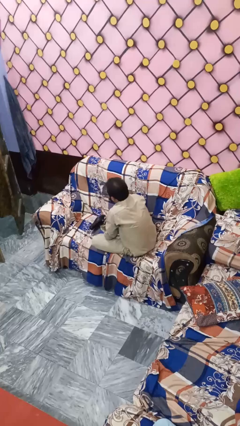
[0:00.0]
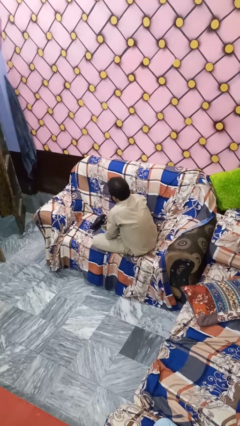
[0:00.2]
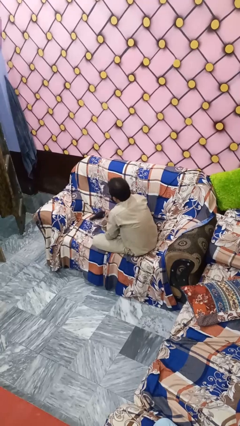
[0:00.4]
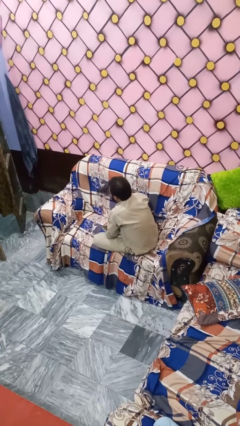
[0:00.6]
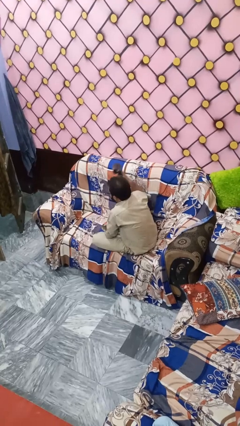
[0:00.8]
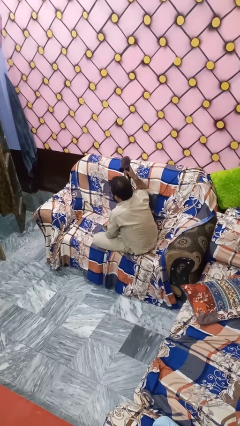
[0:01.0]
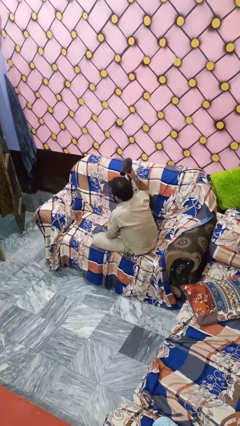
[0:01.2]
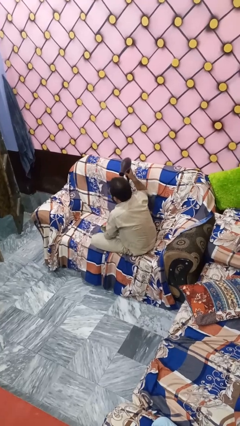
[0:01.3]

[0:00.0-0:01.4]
person dries hair with hairdryer

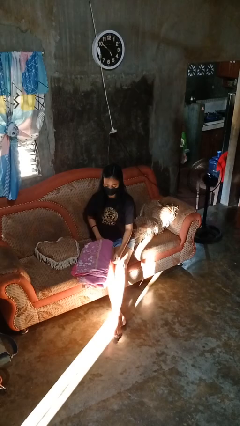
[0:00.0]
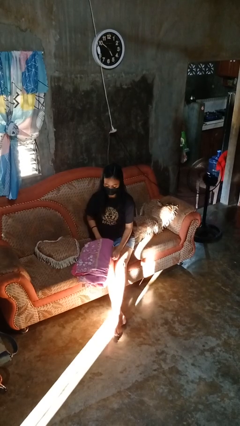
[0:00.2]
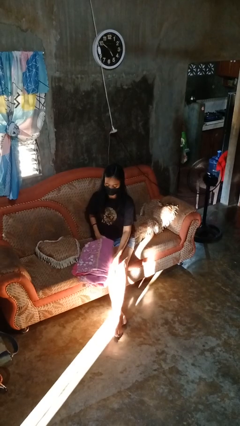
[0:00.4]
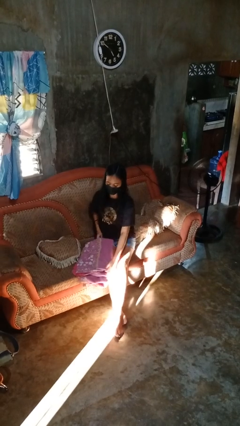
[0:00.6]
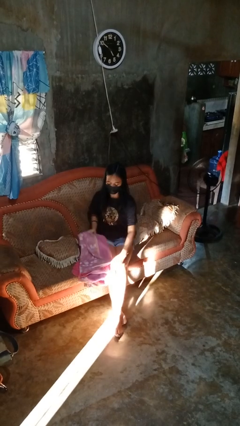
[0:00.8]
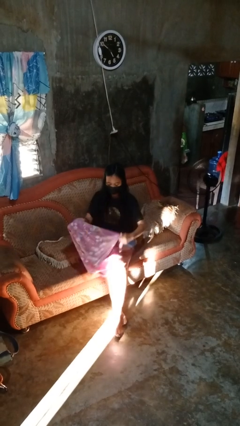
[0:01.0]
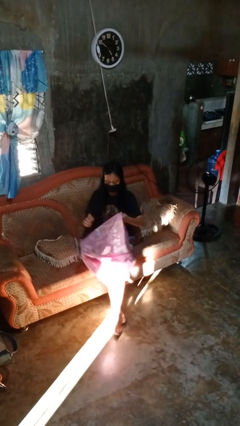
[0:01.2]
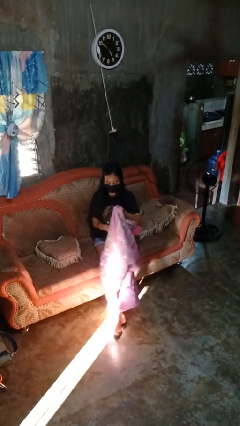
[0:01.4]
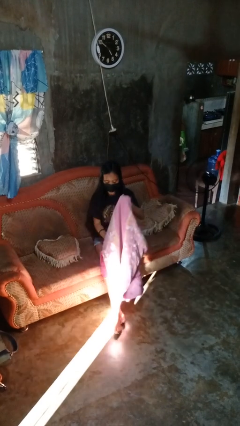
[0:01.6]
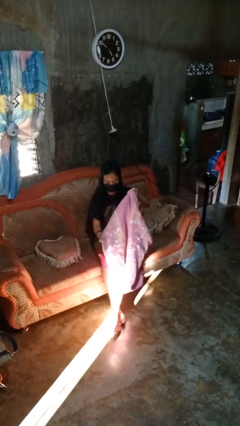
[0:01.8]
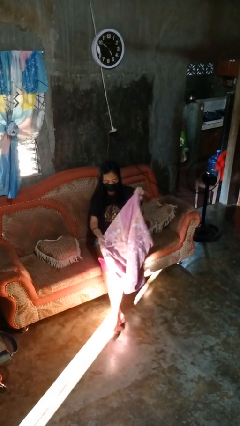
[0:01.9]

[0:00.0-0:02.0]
person unfolds blanket

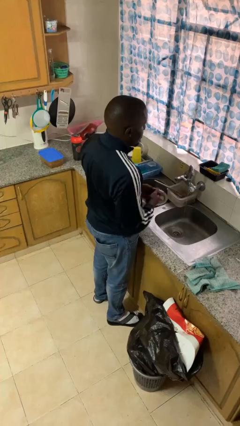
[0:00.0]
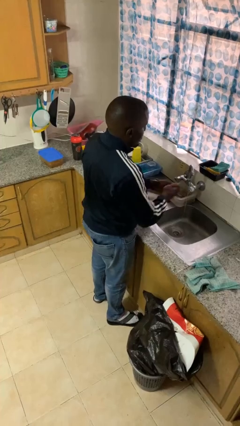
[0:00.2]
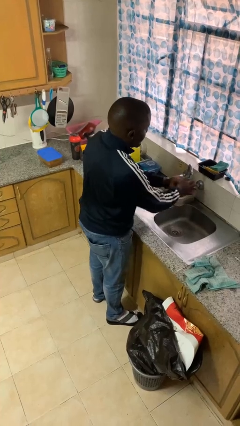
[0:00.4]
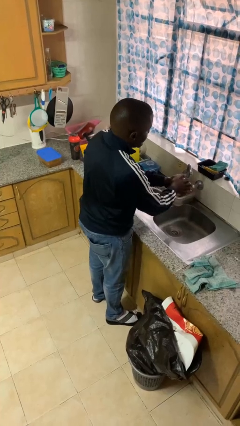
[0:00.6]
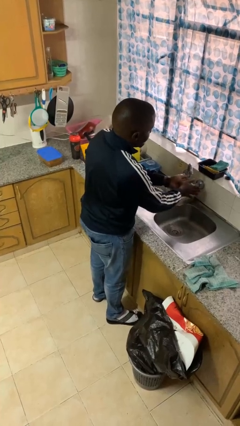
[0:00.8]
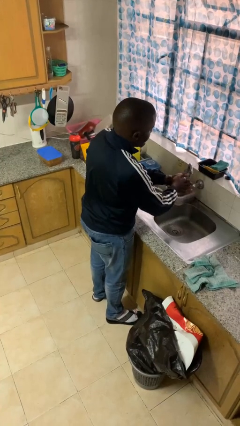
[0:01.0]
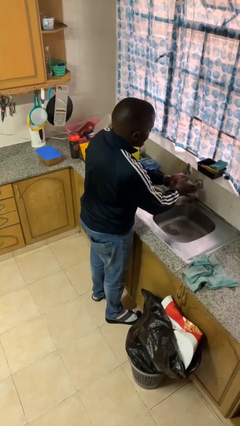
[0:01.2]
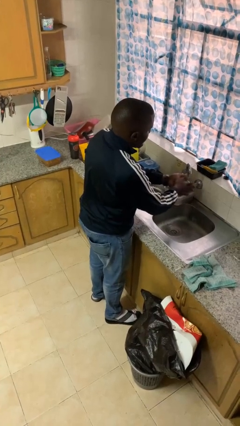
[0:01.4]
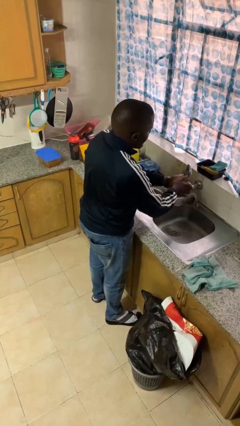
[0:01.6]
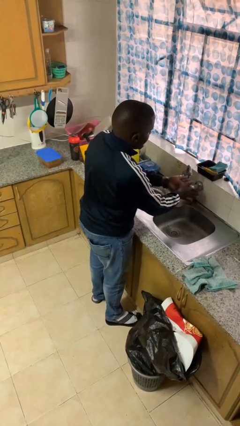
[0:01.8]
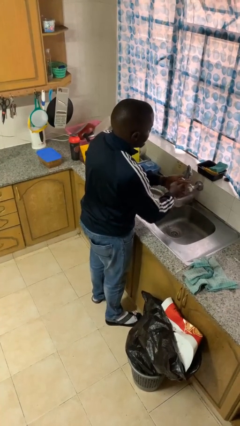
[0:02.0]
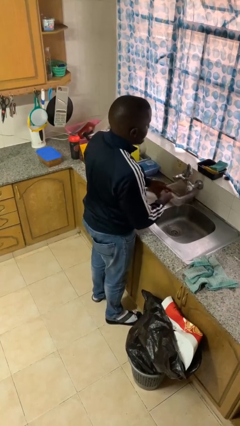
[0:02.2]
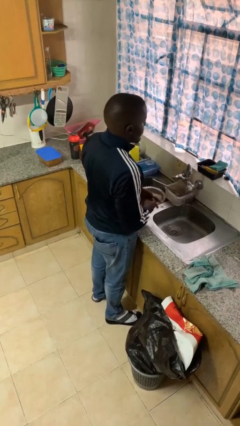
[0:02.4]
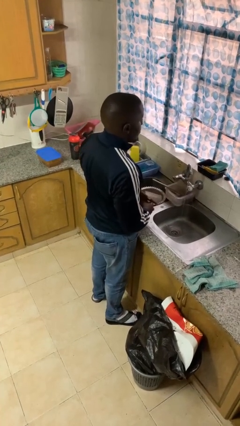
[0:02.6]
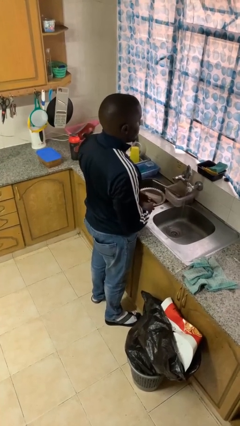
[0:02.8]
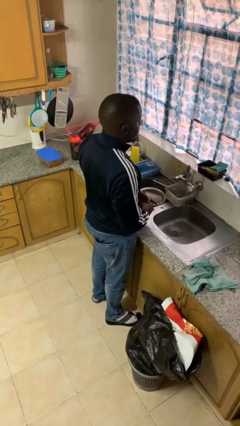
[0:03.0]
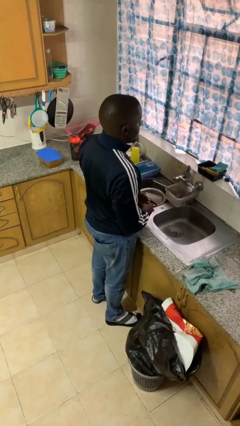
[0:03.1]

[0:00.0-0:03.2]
person washes hands

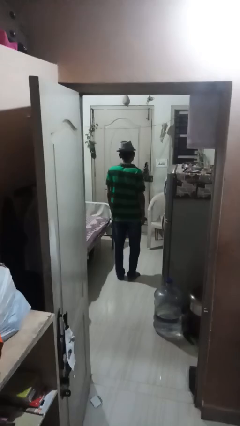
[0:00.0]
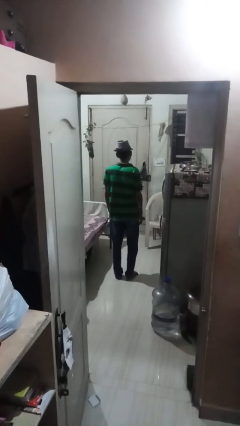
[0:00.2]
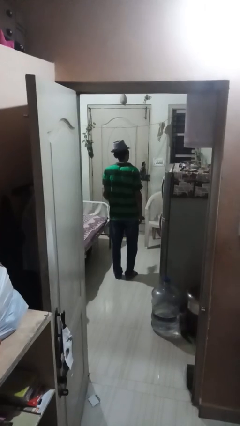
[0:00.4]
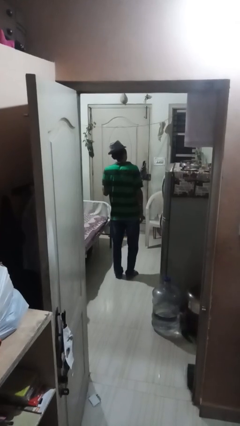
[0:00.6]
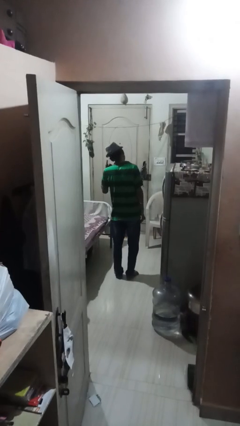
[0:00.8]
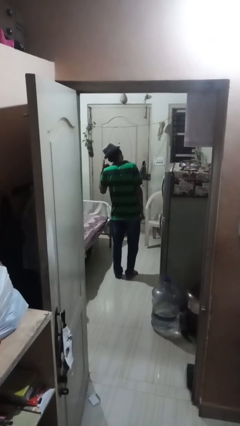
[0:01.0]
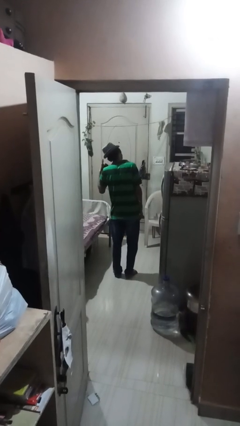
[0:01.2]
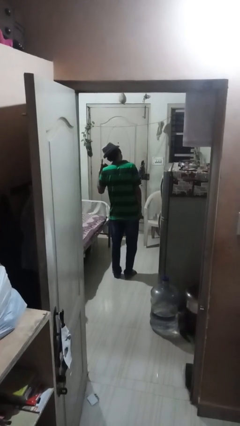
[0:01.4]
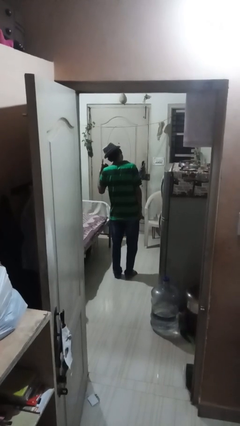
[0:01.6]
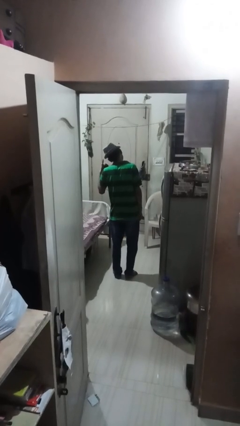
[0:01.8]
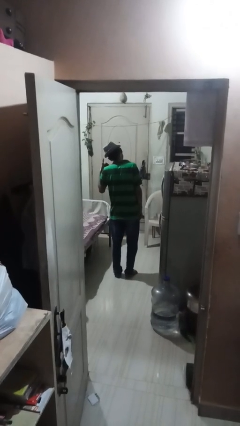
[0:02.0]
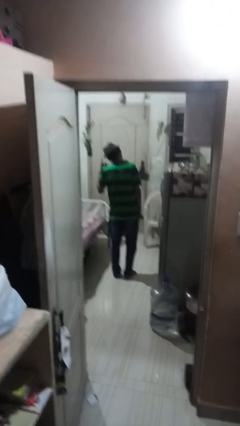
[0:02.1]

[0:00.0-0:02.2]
person gestures call me

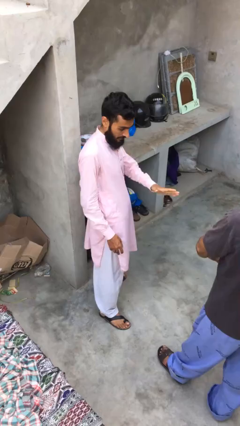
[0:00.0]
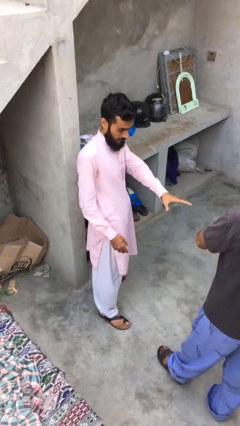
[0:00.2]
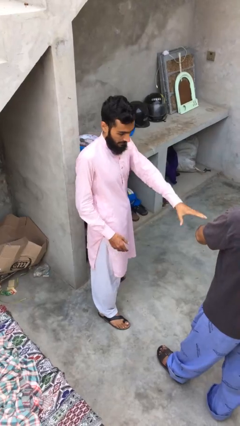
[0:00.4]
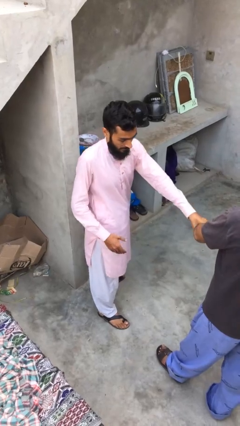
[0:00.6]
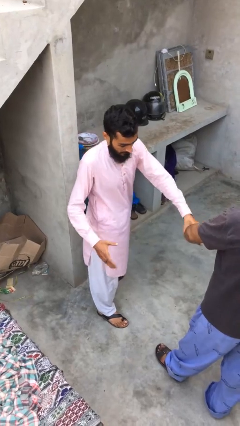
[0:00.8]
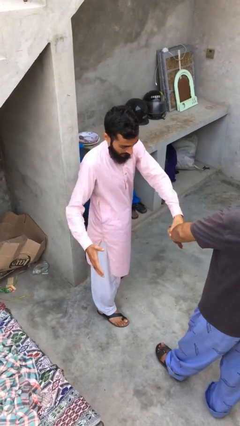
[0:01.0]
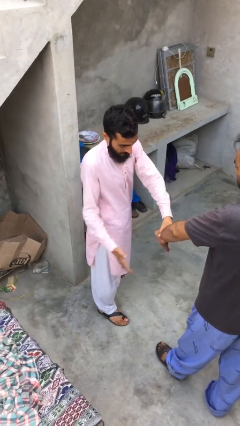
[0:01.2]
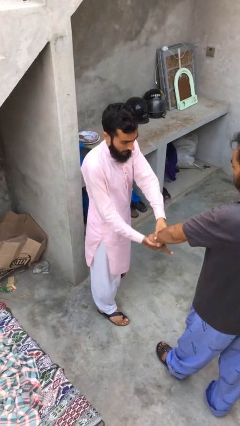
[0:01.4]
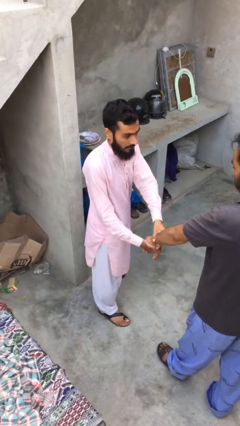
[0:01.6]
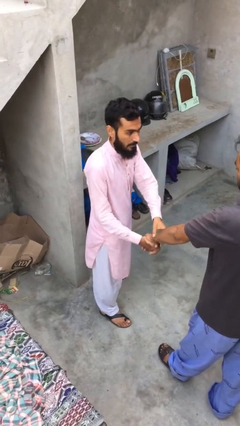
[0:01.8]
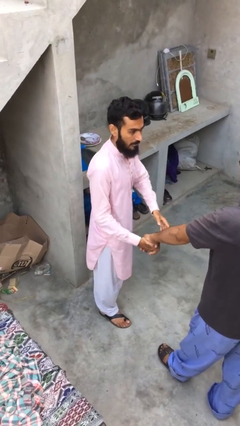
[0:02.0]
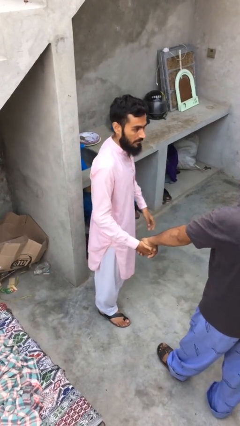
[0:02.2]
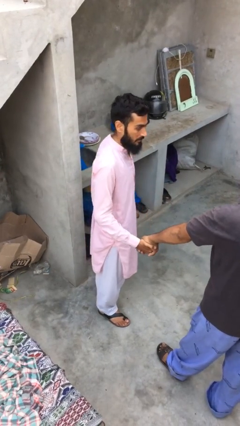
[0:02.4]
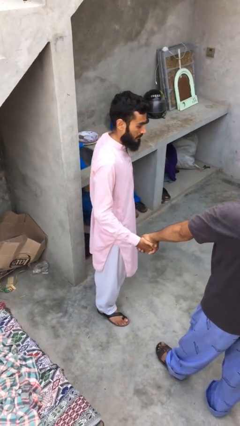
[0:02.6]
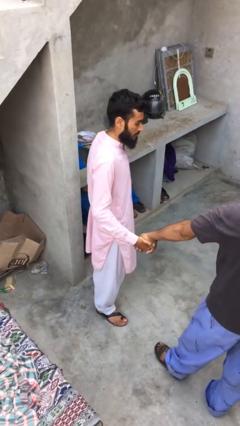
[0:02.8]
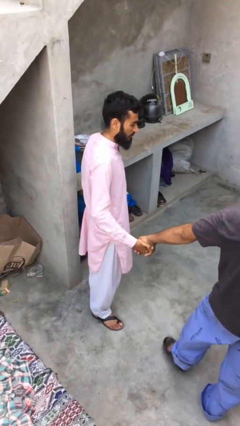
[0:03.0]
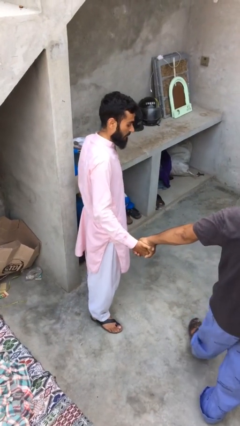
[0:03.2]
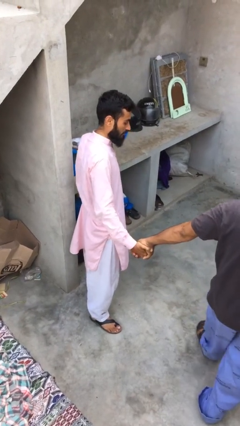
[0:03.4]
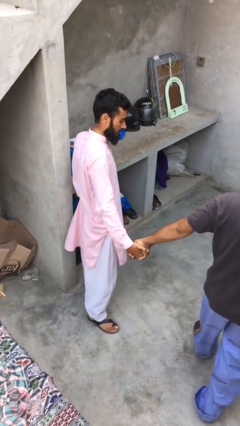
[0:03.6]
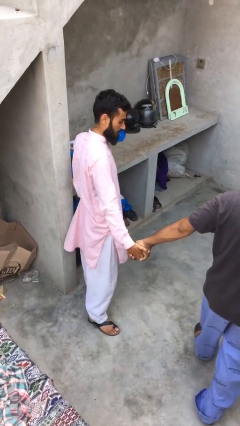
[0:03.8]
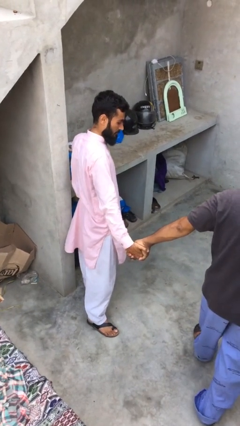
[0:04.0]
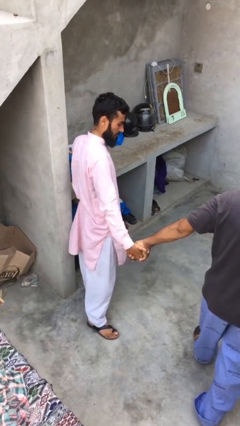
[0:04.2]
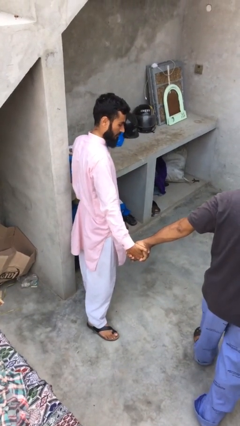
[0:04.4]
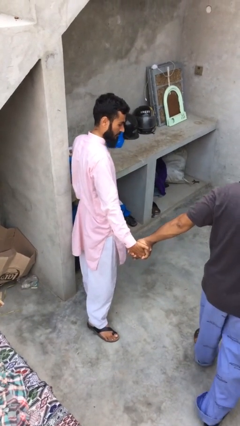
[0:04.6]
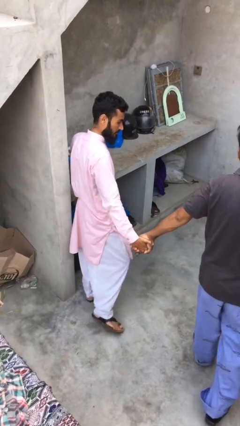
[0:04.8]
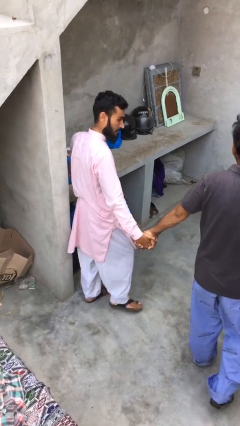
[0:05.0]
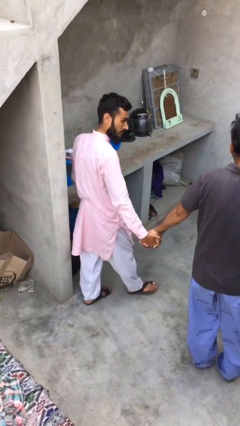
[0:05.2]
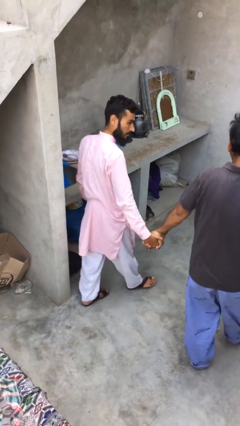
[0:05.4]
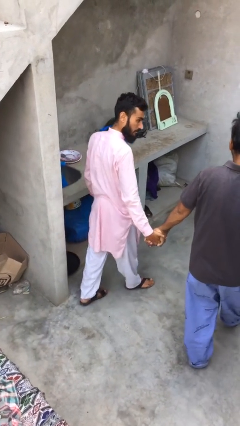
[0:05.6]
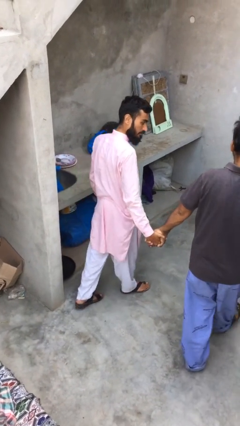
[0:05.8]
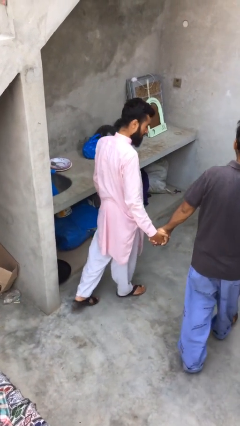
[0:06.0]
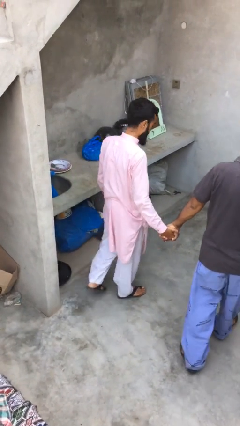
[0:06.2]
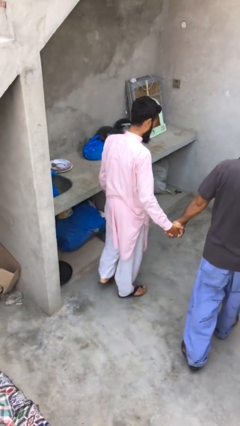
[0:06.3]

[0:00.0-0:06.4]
person holds hand

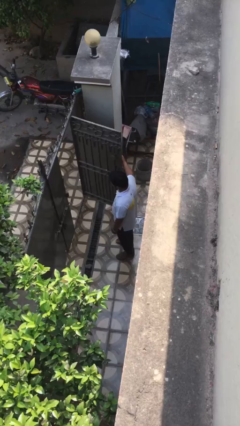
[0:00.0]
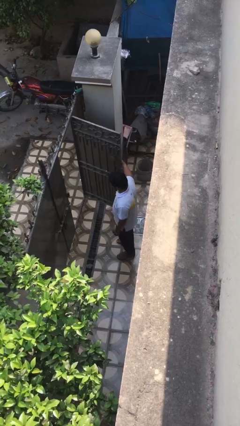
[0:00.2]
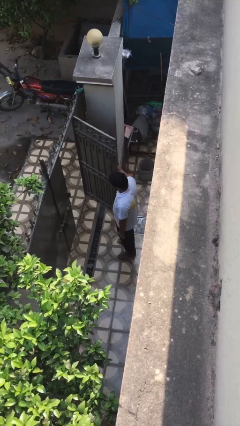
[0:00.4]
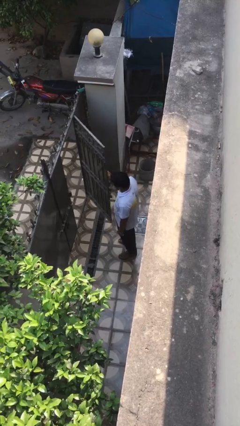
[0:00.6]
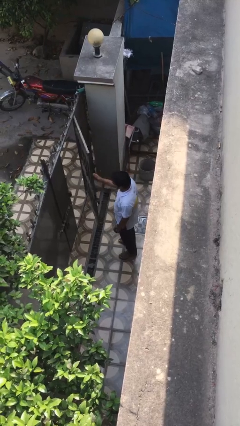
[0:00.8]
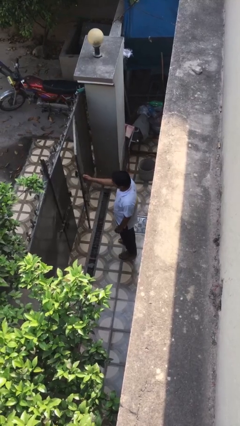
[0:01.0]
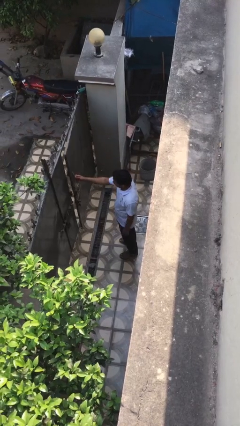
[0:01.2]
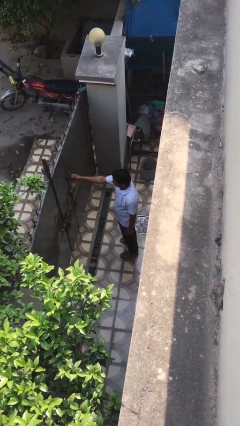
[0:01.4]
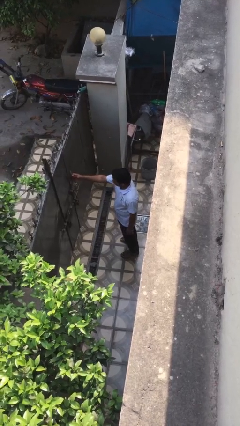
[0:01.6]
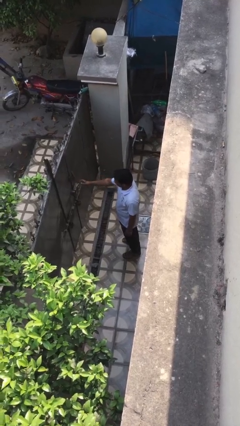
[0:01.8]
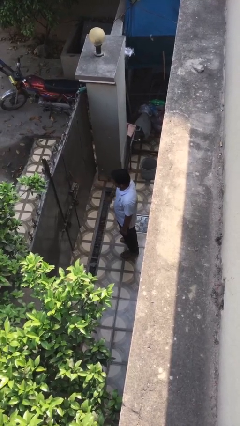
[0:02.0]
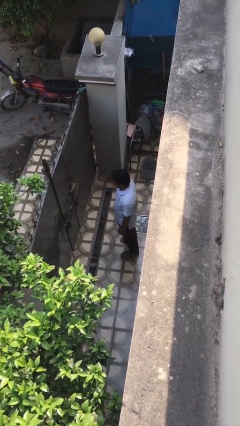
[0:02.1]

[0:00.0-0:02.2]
person closes facility door

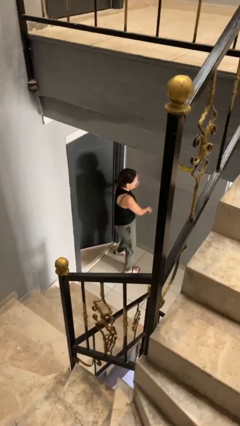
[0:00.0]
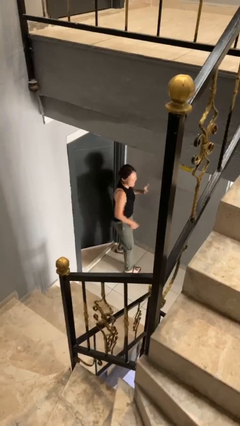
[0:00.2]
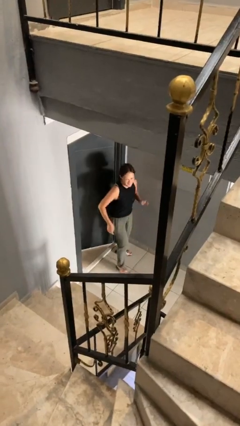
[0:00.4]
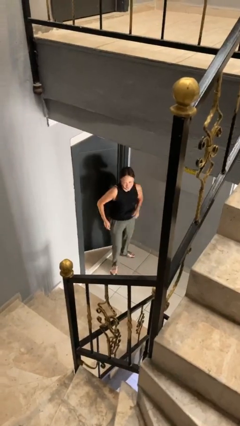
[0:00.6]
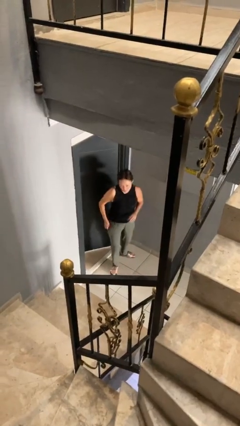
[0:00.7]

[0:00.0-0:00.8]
person climbs up stairs
